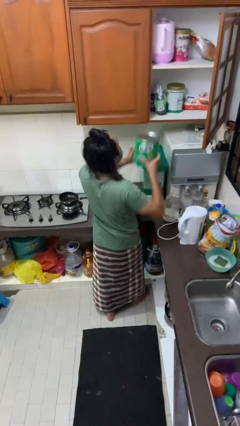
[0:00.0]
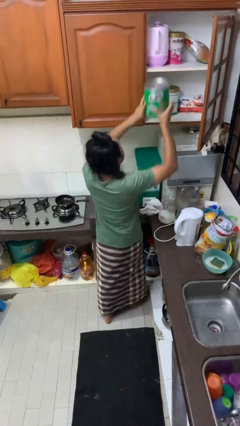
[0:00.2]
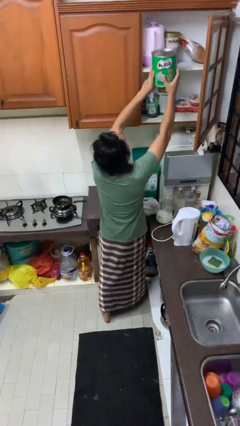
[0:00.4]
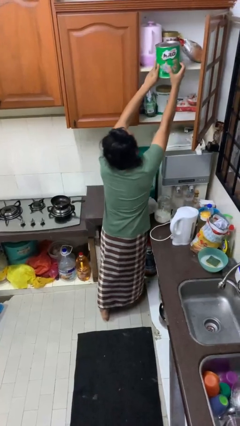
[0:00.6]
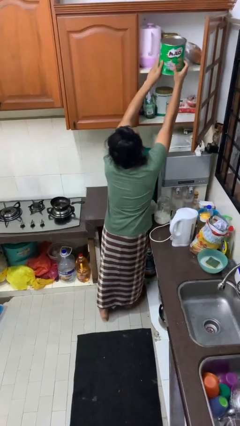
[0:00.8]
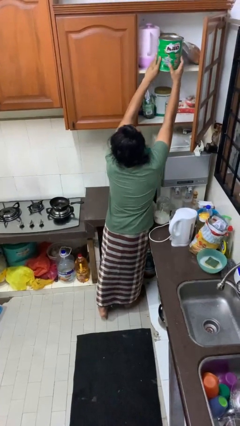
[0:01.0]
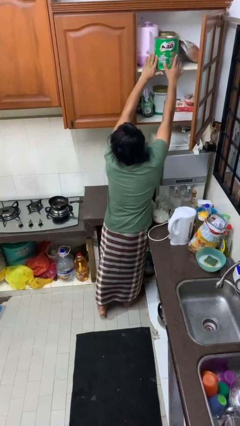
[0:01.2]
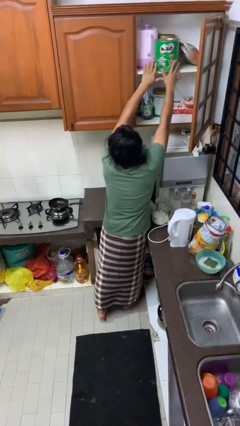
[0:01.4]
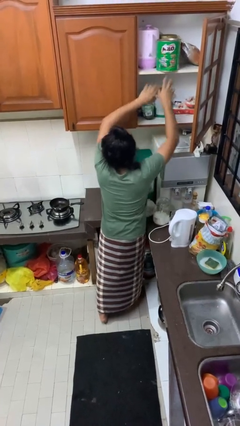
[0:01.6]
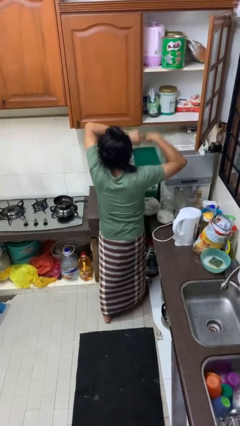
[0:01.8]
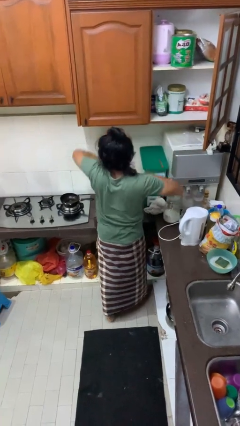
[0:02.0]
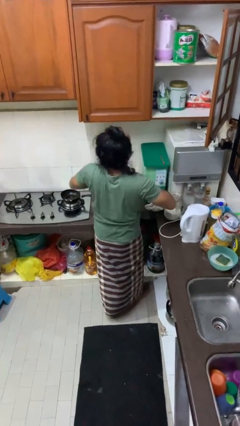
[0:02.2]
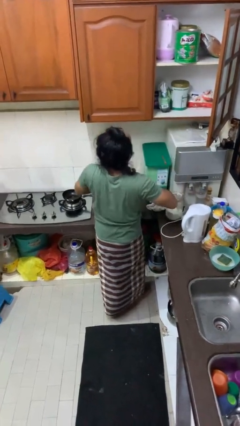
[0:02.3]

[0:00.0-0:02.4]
person puts object in cabinet

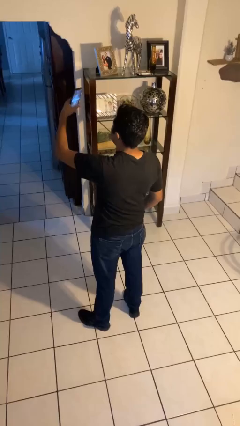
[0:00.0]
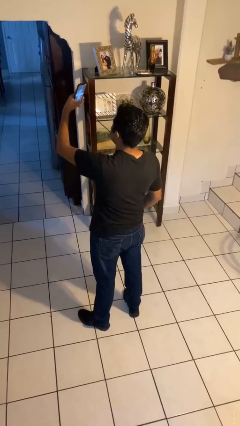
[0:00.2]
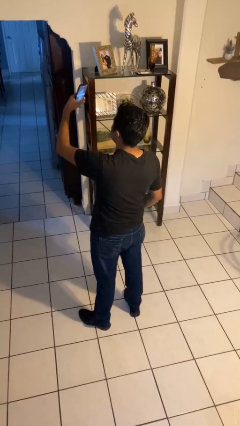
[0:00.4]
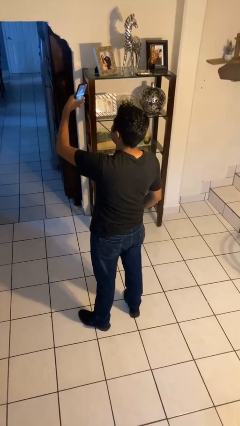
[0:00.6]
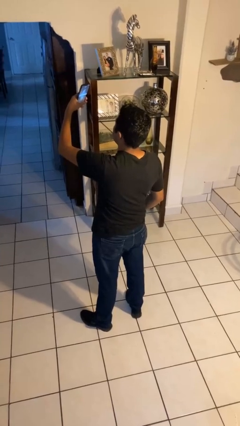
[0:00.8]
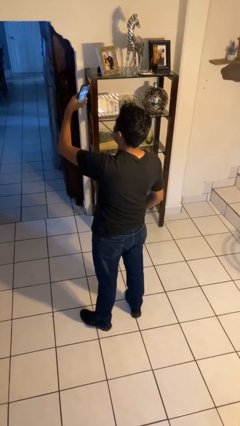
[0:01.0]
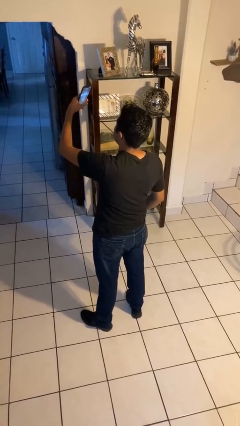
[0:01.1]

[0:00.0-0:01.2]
person takes selfie

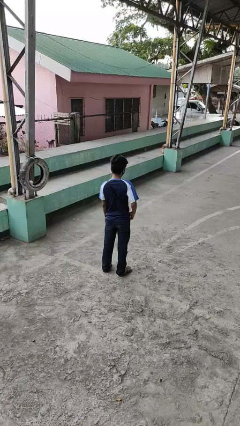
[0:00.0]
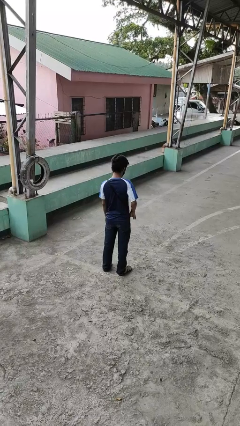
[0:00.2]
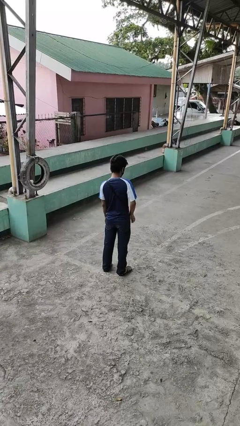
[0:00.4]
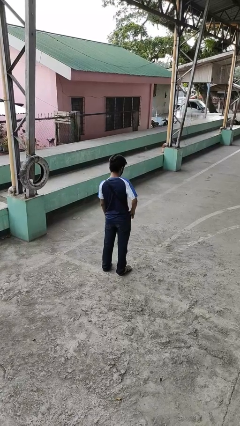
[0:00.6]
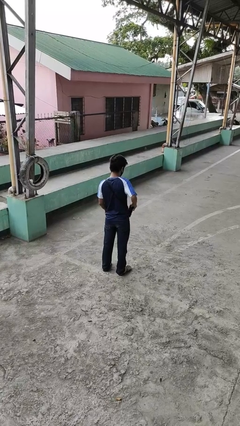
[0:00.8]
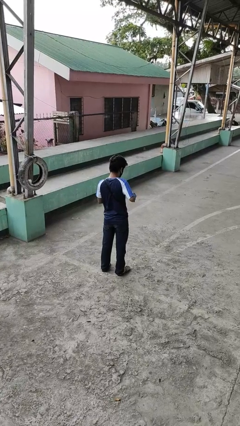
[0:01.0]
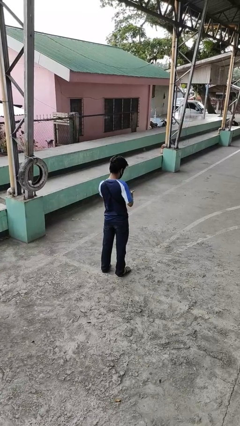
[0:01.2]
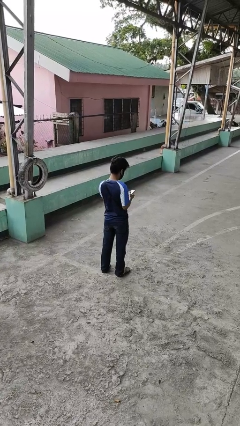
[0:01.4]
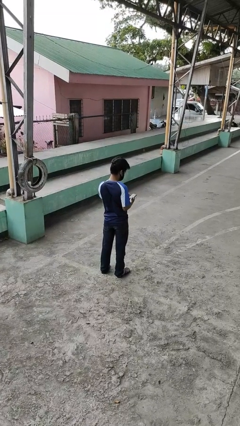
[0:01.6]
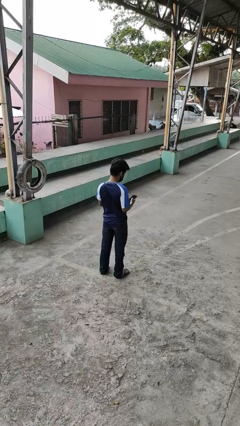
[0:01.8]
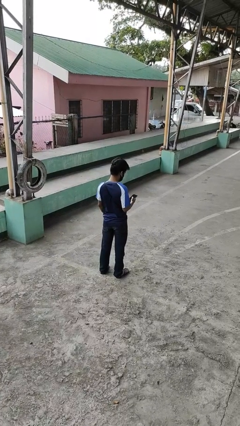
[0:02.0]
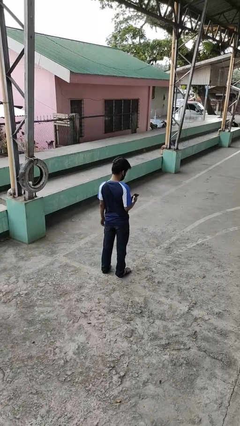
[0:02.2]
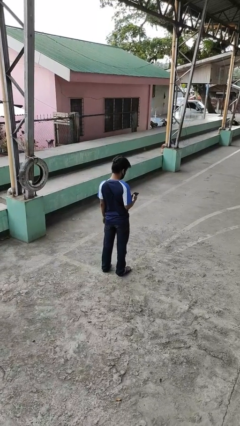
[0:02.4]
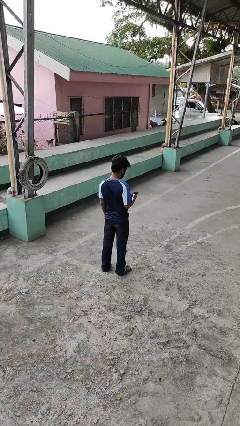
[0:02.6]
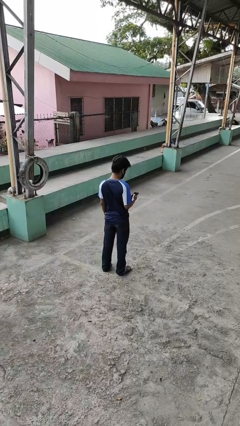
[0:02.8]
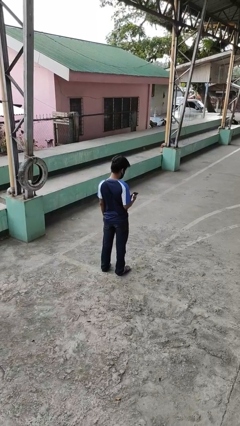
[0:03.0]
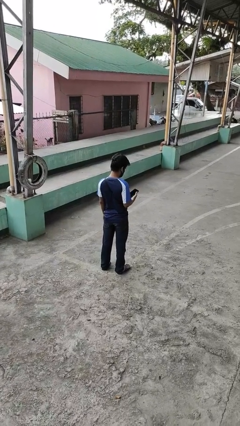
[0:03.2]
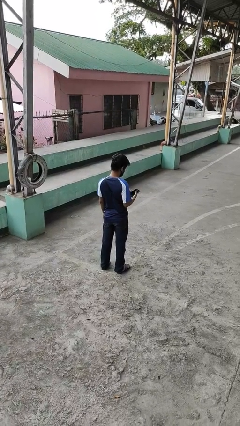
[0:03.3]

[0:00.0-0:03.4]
person takes phone from pocket

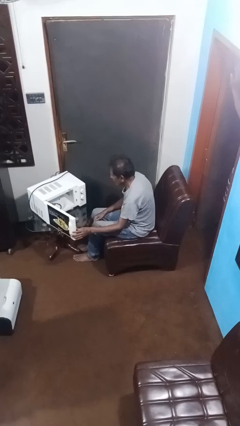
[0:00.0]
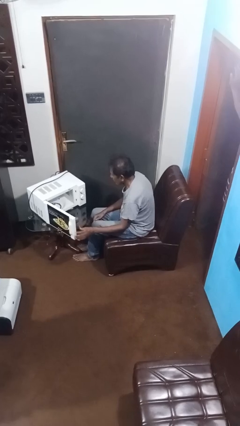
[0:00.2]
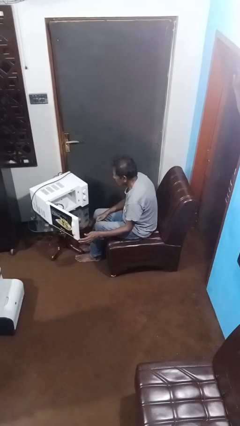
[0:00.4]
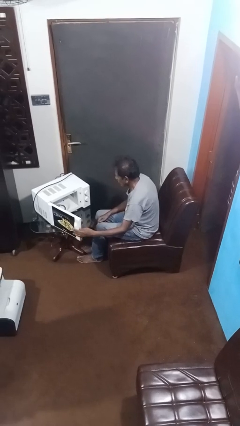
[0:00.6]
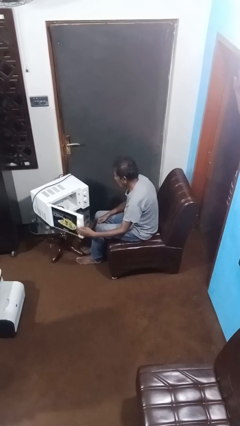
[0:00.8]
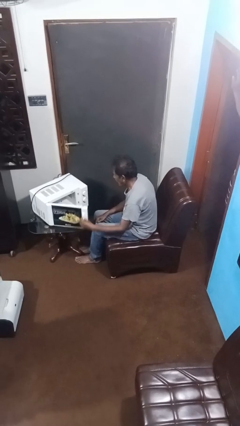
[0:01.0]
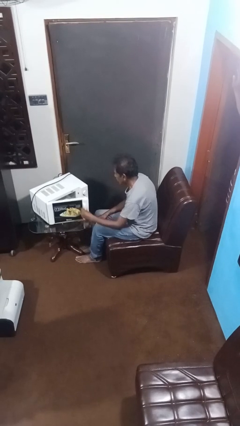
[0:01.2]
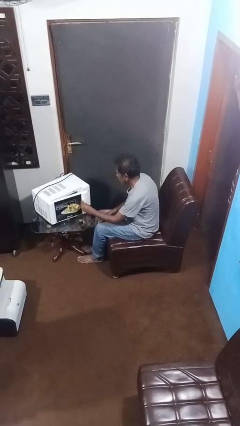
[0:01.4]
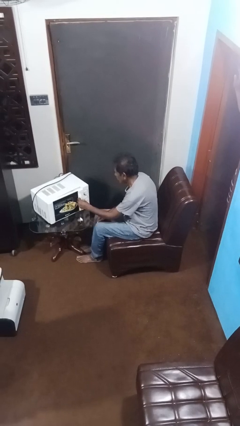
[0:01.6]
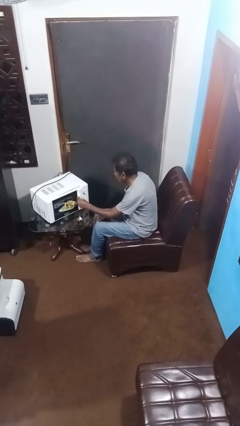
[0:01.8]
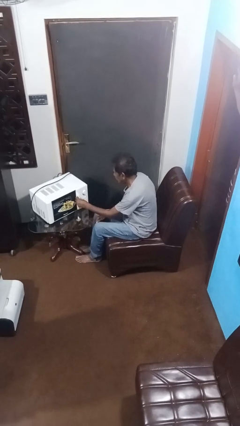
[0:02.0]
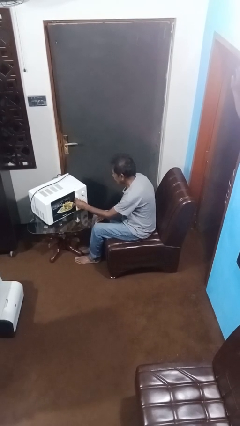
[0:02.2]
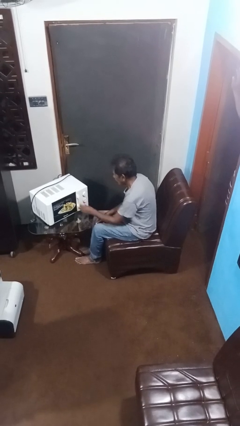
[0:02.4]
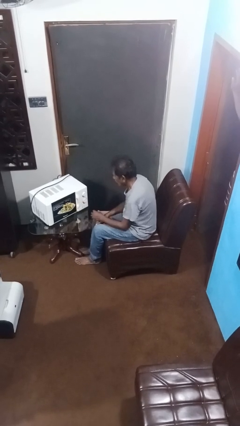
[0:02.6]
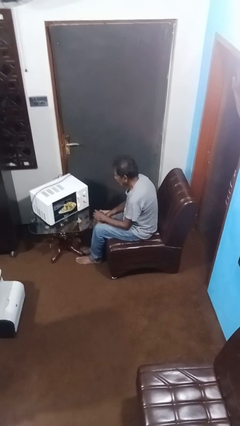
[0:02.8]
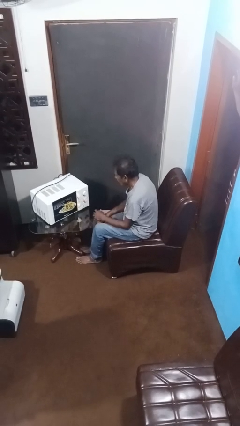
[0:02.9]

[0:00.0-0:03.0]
person closes microwave

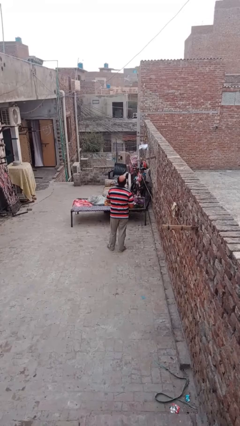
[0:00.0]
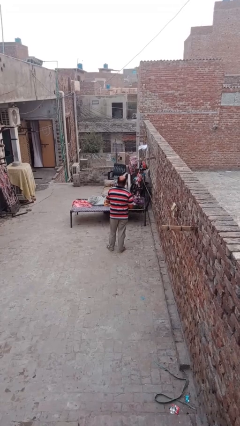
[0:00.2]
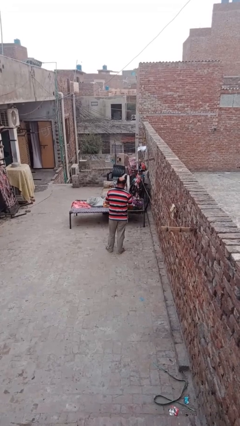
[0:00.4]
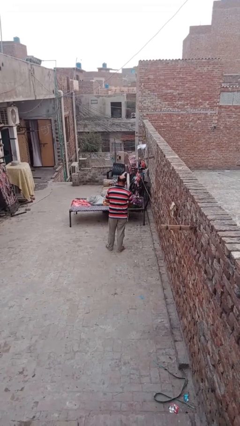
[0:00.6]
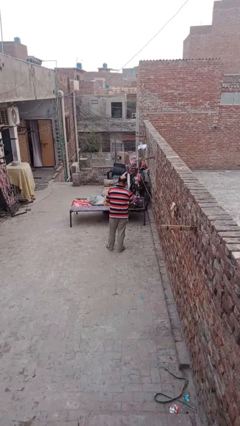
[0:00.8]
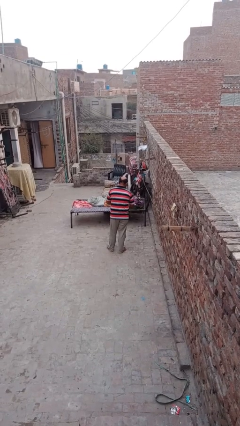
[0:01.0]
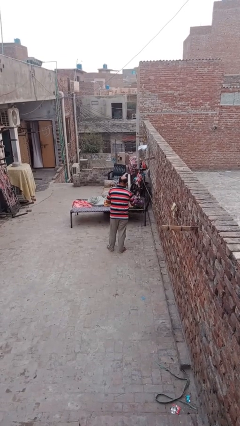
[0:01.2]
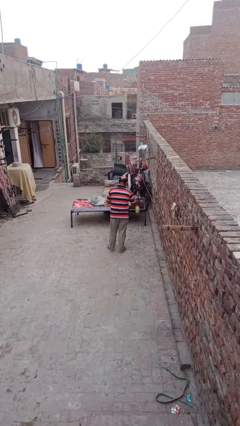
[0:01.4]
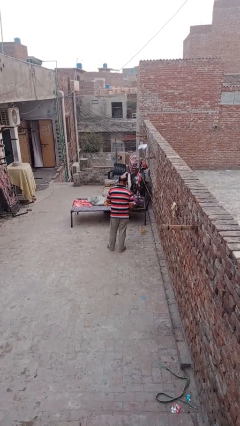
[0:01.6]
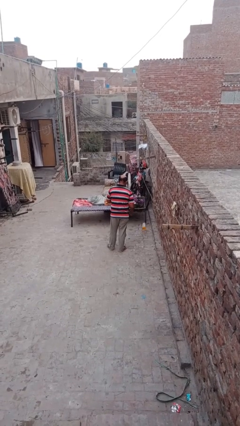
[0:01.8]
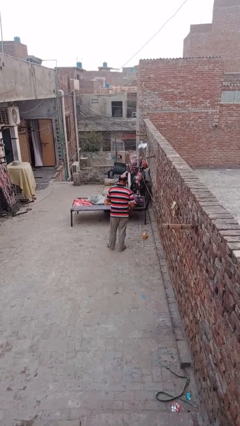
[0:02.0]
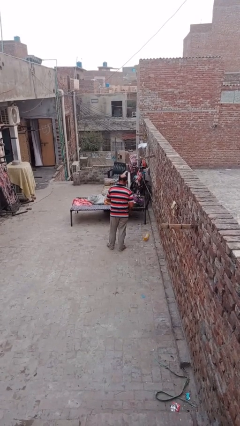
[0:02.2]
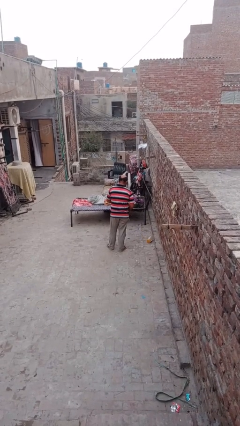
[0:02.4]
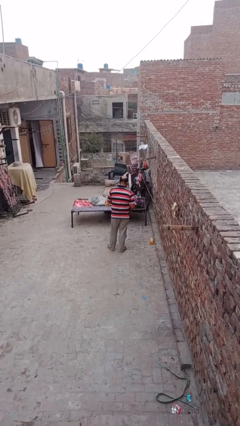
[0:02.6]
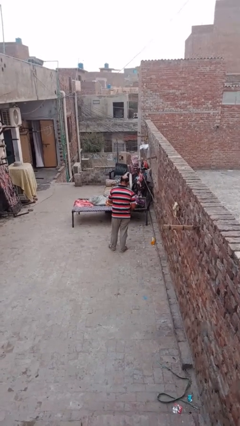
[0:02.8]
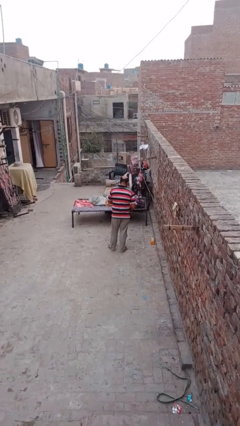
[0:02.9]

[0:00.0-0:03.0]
person discards trash

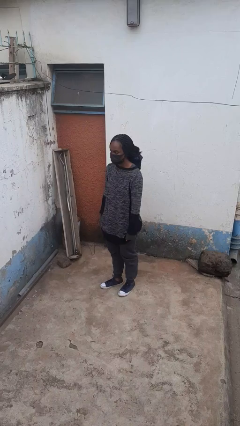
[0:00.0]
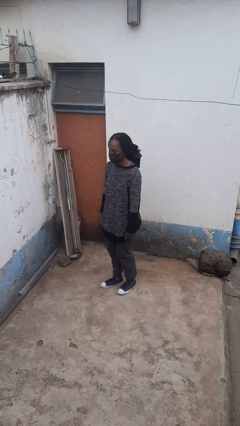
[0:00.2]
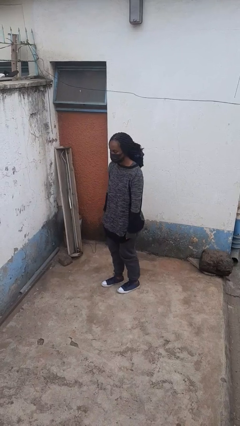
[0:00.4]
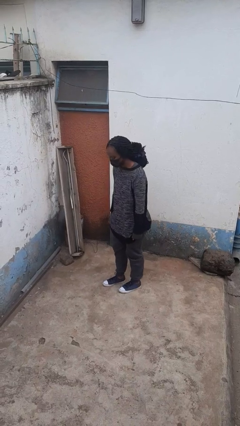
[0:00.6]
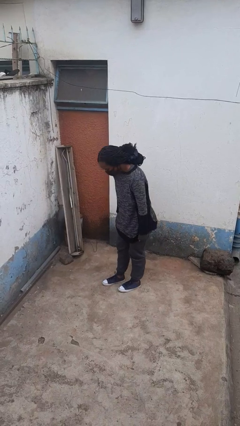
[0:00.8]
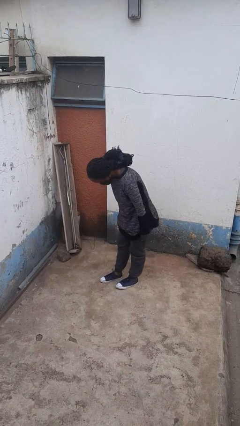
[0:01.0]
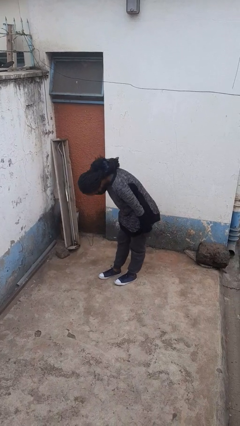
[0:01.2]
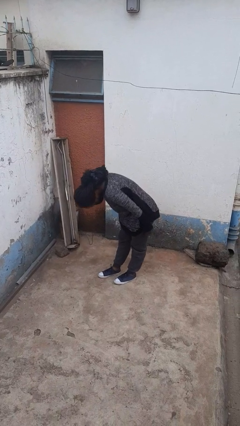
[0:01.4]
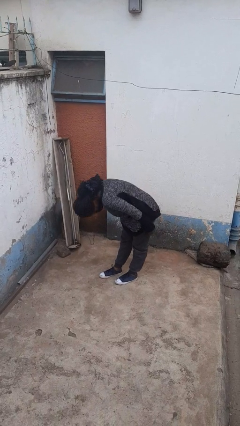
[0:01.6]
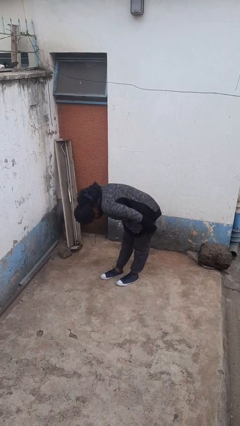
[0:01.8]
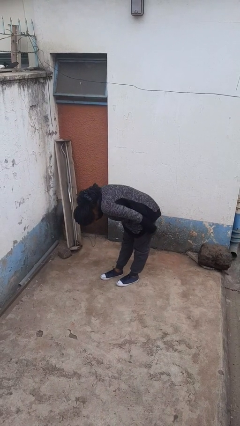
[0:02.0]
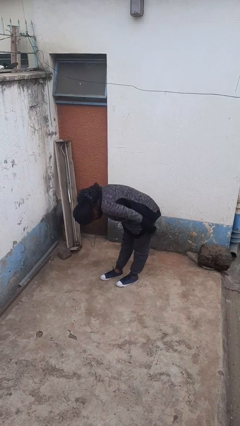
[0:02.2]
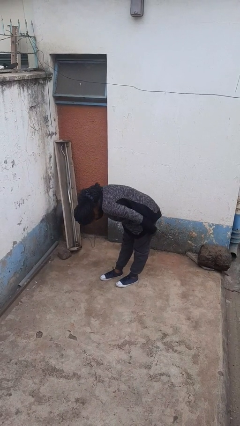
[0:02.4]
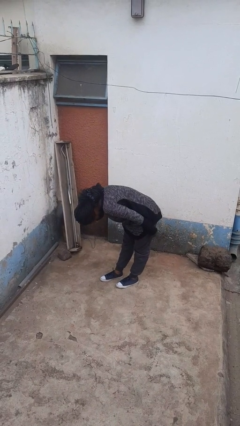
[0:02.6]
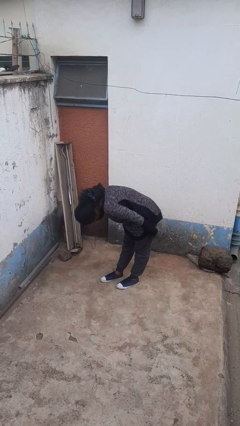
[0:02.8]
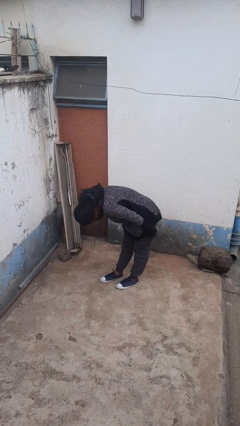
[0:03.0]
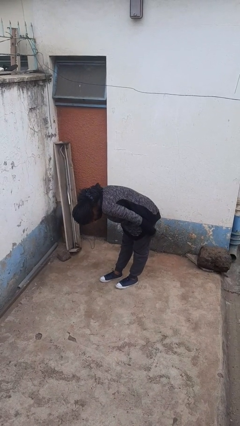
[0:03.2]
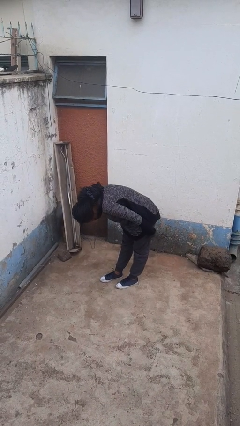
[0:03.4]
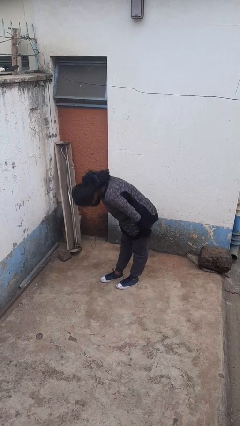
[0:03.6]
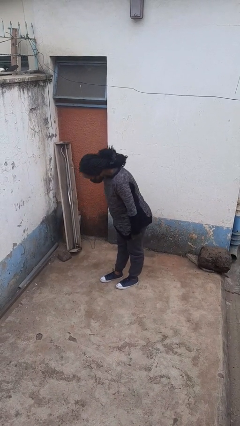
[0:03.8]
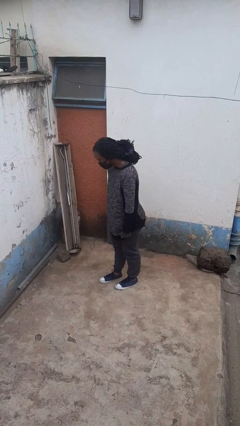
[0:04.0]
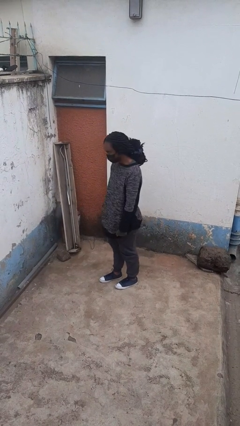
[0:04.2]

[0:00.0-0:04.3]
person bows
